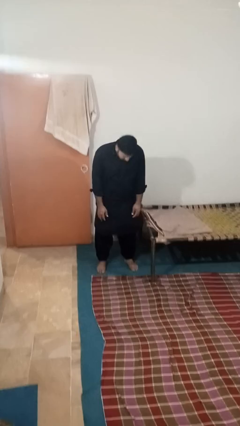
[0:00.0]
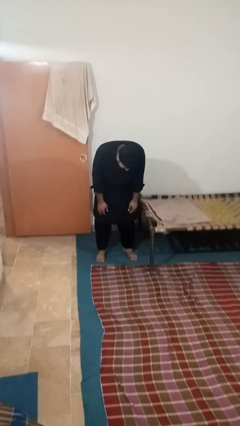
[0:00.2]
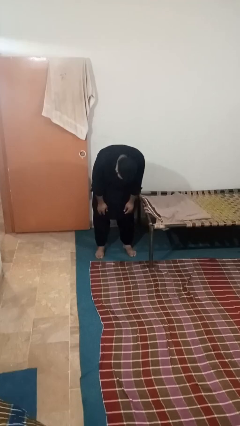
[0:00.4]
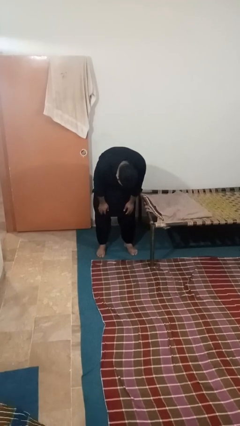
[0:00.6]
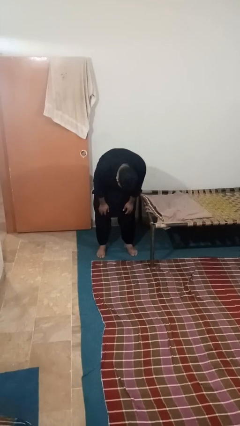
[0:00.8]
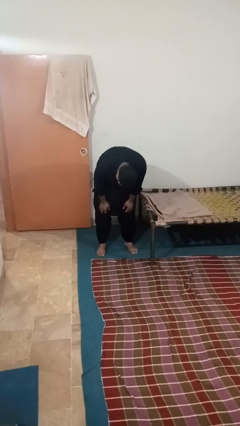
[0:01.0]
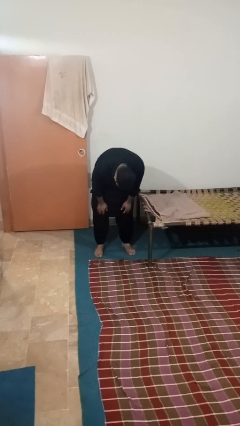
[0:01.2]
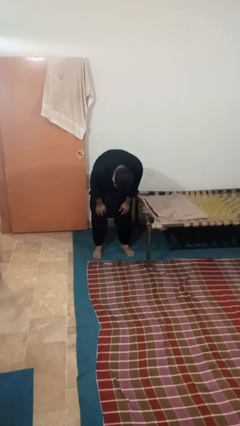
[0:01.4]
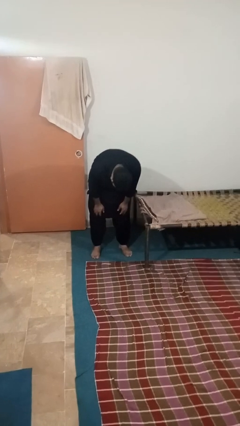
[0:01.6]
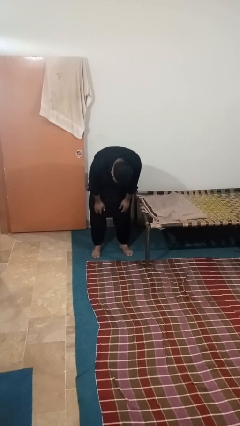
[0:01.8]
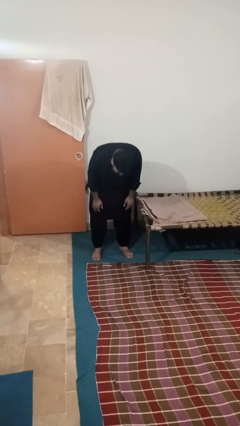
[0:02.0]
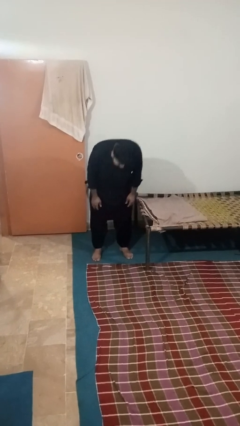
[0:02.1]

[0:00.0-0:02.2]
person bows

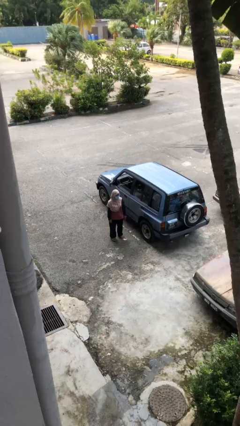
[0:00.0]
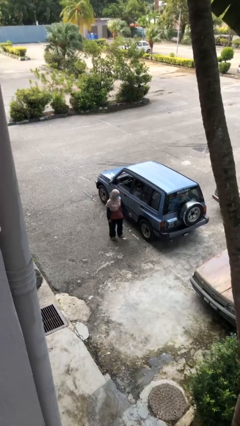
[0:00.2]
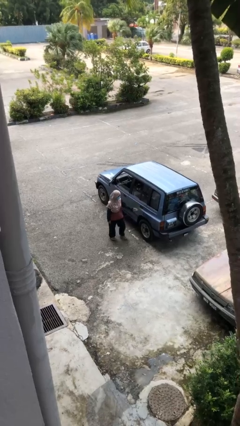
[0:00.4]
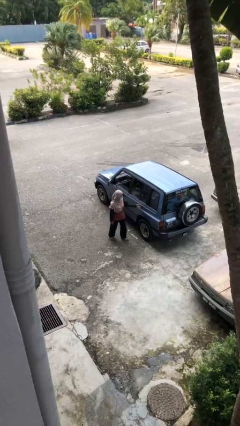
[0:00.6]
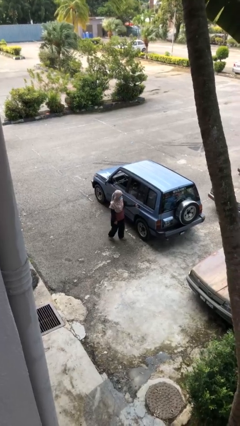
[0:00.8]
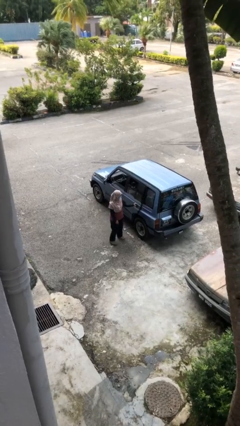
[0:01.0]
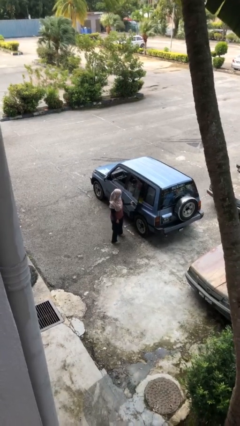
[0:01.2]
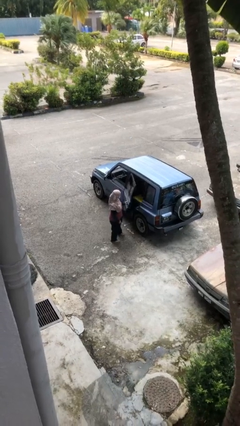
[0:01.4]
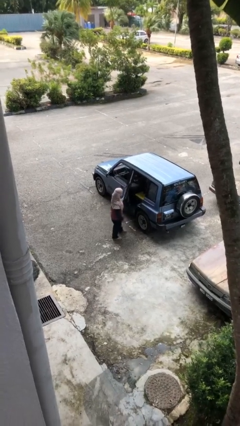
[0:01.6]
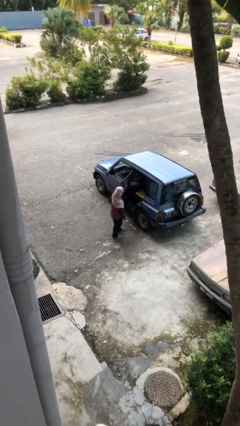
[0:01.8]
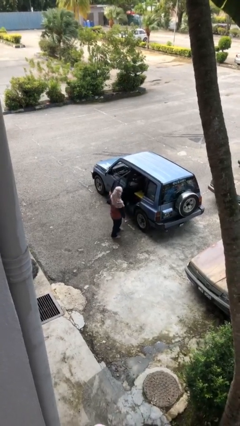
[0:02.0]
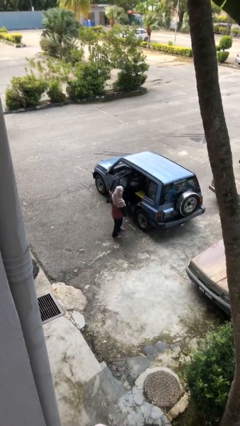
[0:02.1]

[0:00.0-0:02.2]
person opens car door

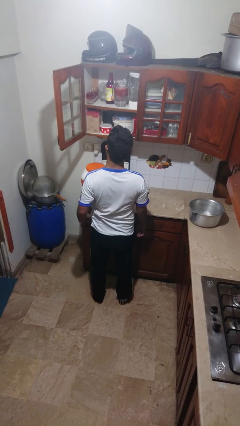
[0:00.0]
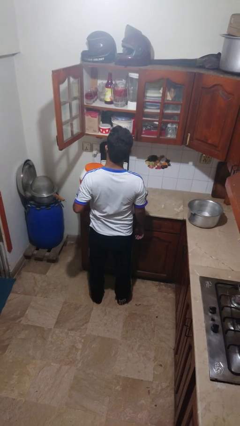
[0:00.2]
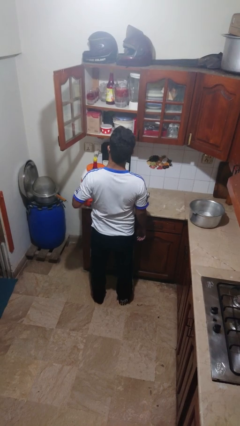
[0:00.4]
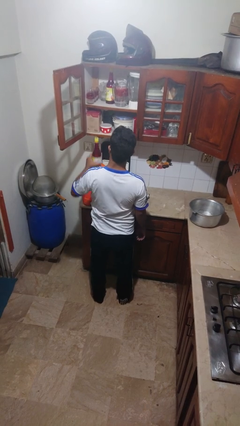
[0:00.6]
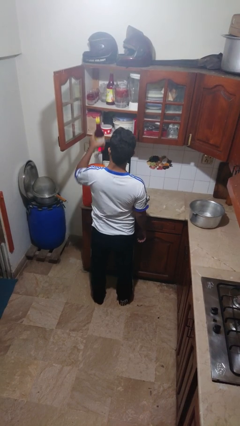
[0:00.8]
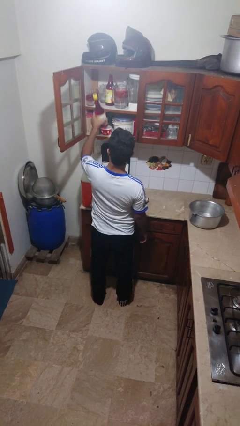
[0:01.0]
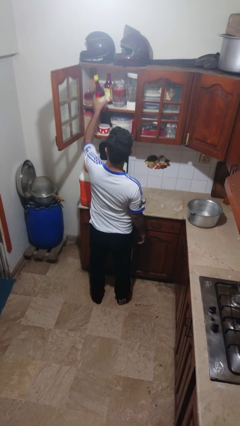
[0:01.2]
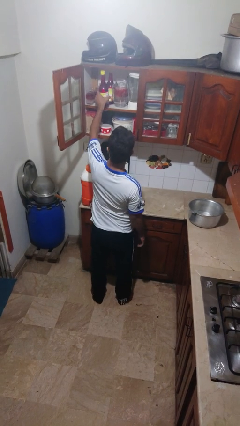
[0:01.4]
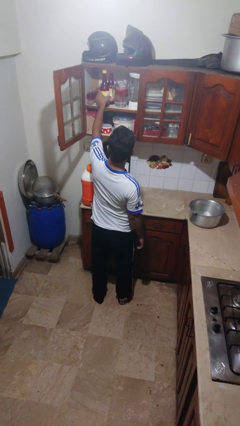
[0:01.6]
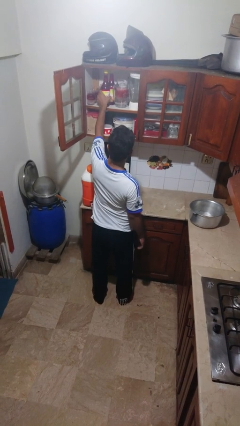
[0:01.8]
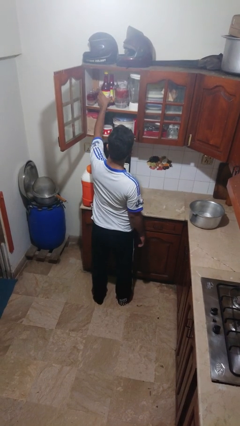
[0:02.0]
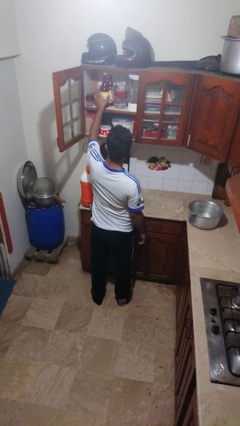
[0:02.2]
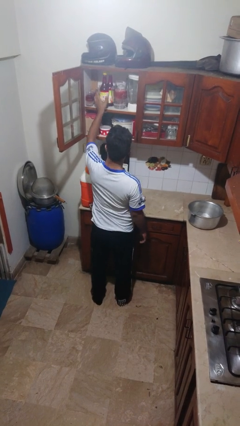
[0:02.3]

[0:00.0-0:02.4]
person puts down object into cabinet

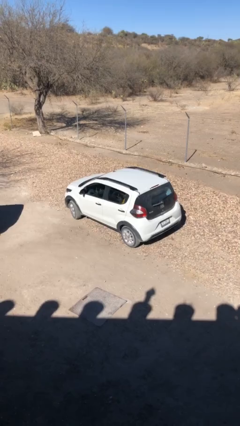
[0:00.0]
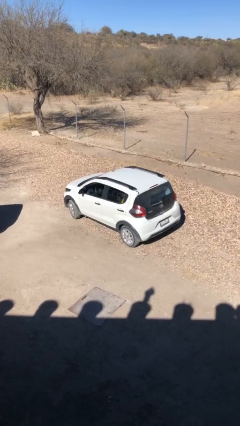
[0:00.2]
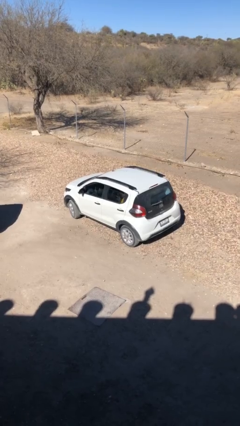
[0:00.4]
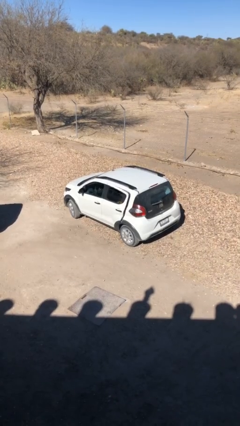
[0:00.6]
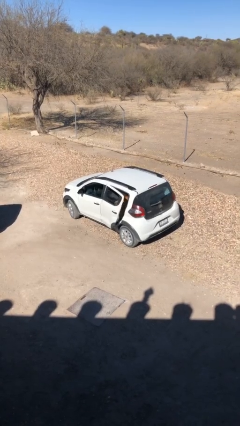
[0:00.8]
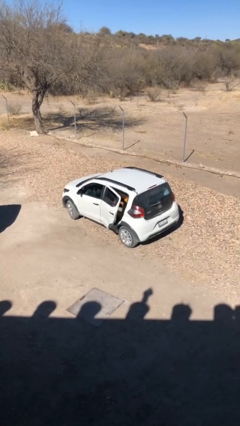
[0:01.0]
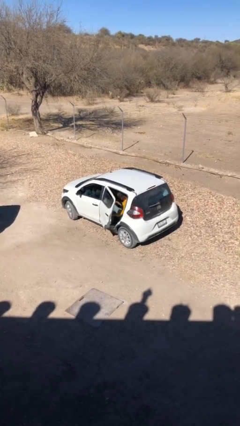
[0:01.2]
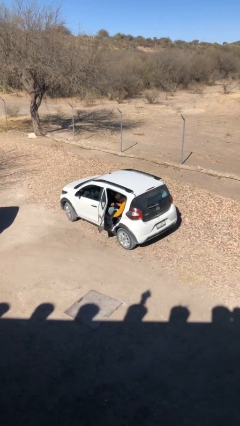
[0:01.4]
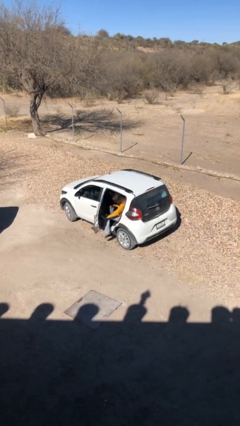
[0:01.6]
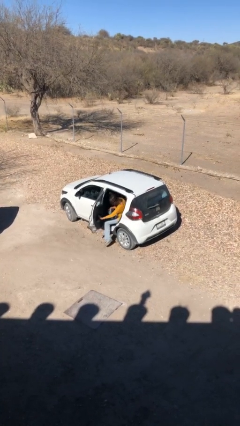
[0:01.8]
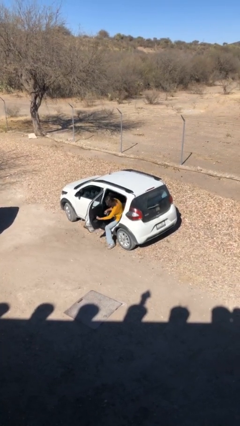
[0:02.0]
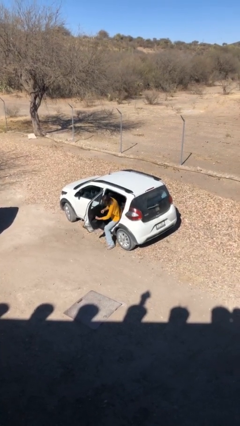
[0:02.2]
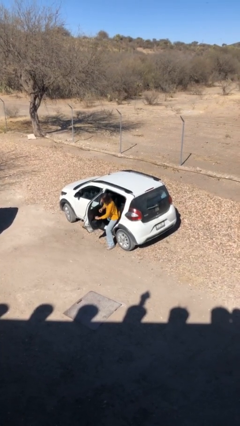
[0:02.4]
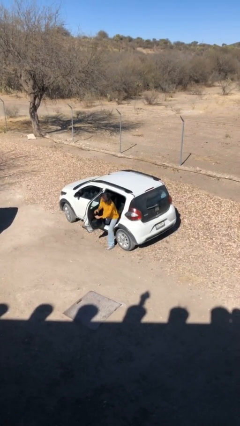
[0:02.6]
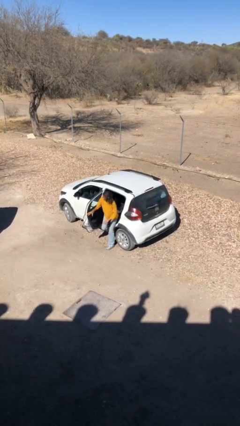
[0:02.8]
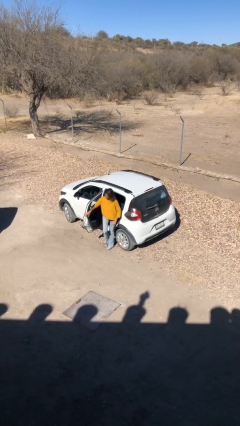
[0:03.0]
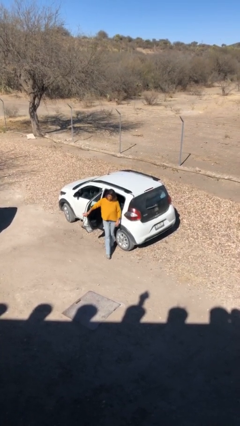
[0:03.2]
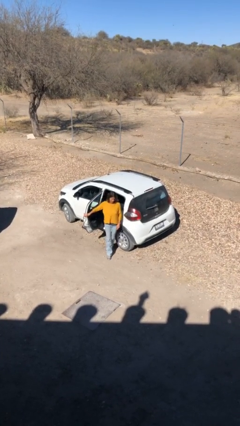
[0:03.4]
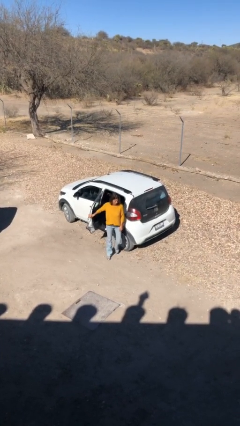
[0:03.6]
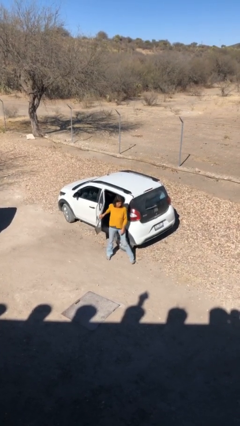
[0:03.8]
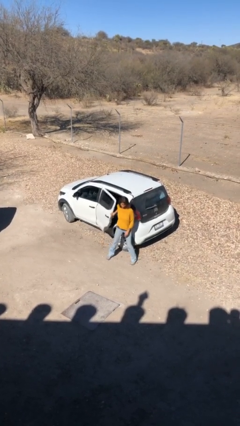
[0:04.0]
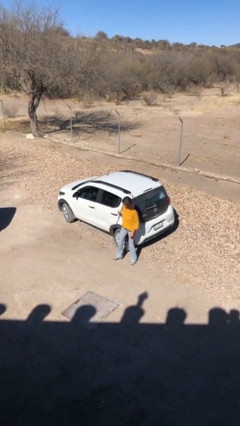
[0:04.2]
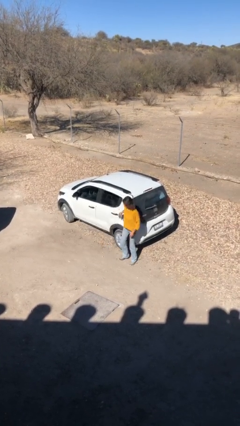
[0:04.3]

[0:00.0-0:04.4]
car drops off person

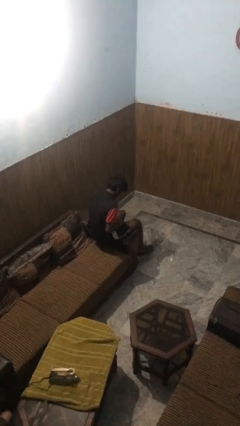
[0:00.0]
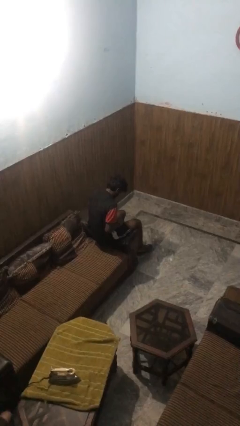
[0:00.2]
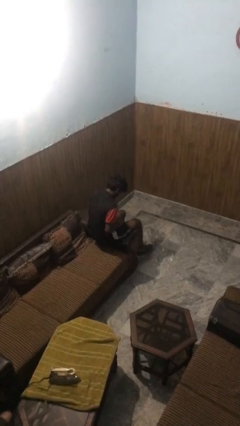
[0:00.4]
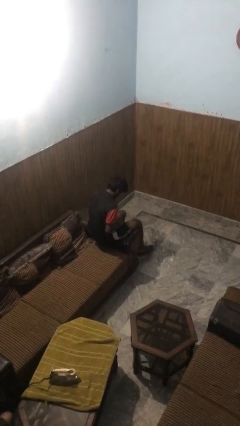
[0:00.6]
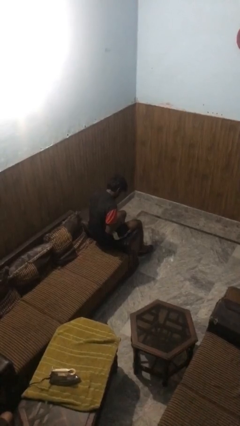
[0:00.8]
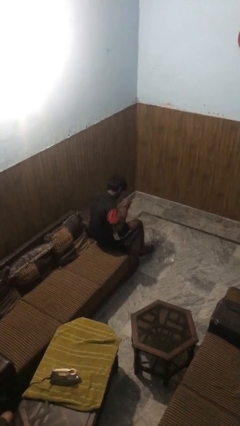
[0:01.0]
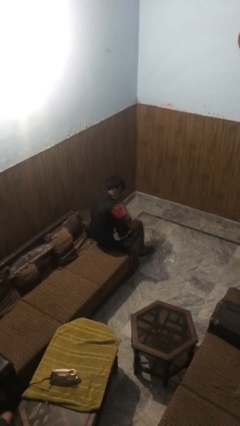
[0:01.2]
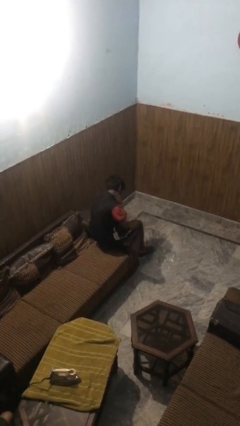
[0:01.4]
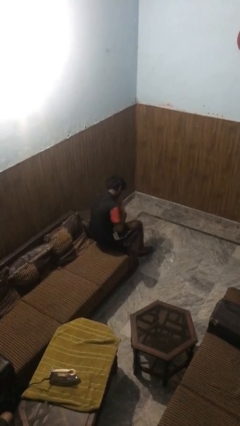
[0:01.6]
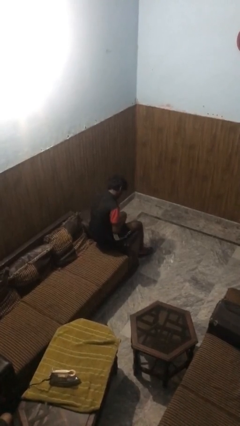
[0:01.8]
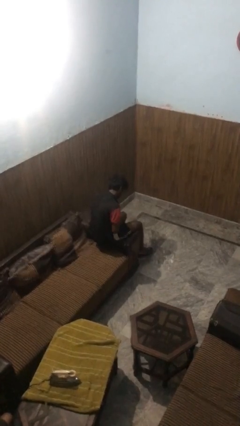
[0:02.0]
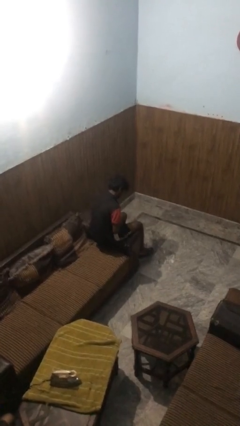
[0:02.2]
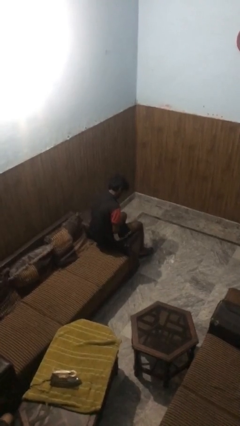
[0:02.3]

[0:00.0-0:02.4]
person swats bug

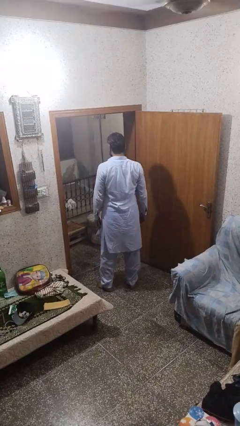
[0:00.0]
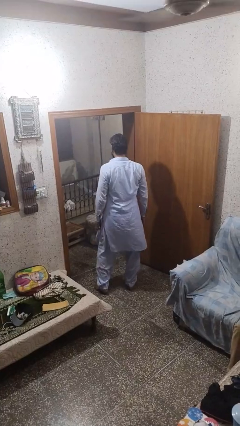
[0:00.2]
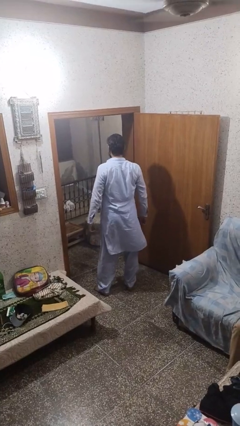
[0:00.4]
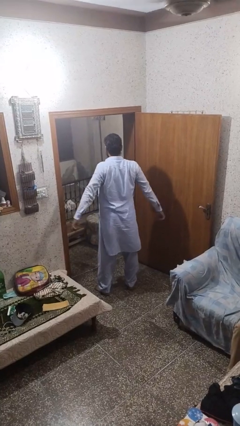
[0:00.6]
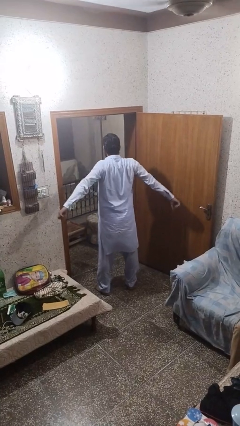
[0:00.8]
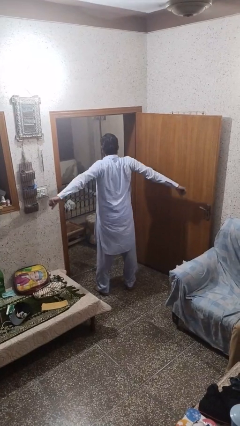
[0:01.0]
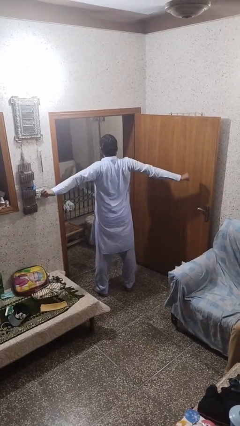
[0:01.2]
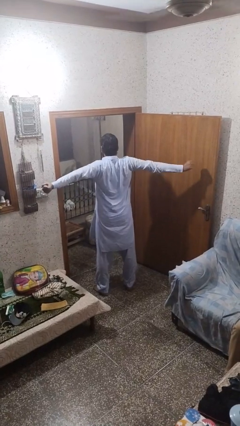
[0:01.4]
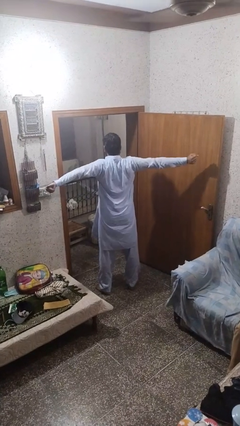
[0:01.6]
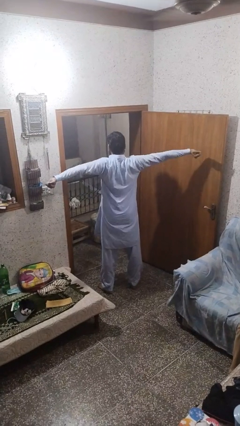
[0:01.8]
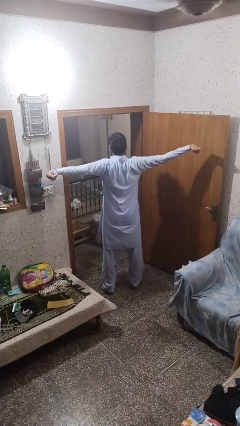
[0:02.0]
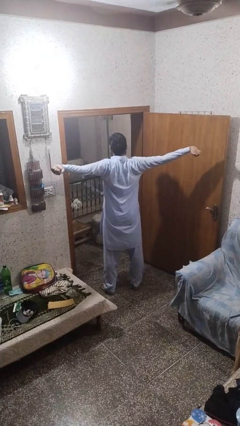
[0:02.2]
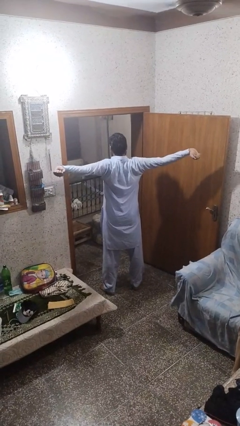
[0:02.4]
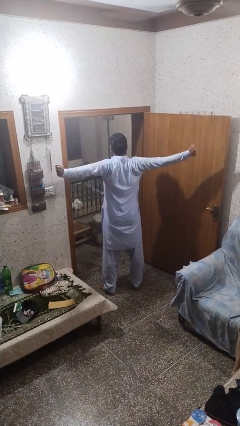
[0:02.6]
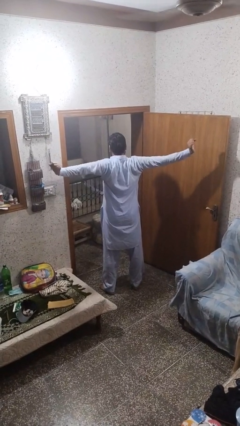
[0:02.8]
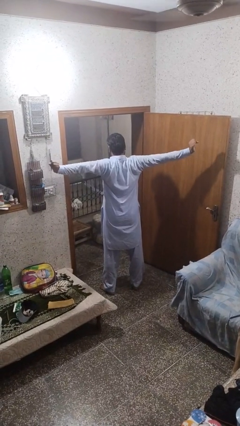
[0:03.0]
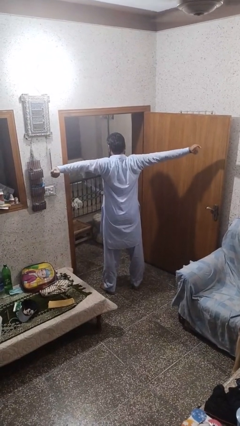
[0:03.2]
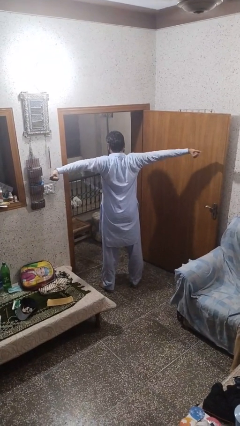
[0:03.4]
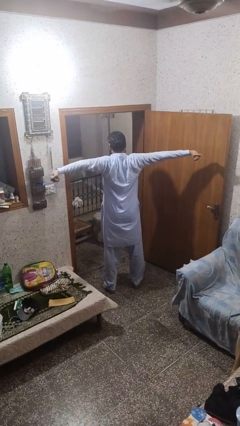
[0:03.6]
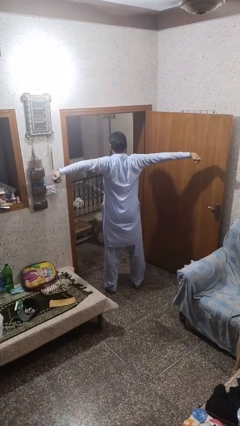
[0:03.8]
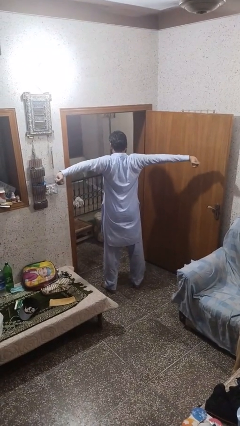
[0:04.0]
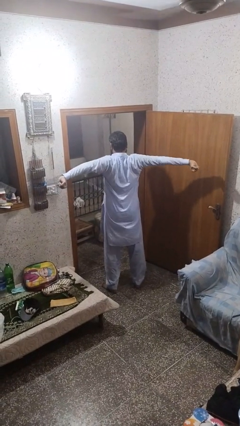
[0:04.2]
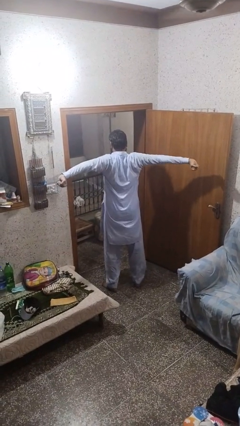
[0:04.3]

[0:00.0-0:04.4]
person stretches arms to side
